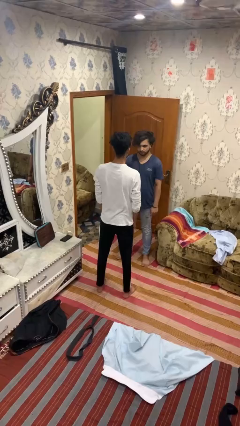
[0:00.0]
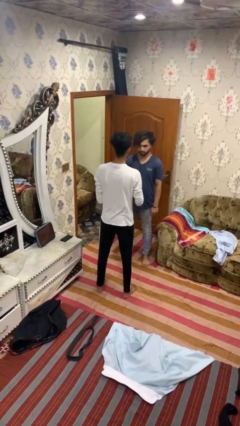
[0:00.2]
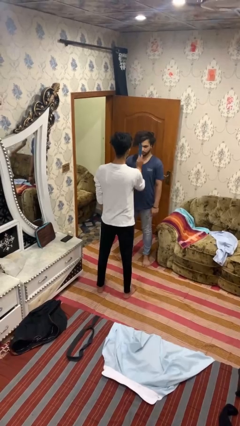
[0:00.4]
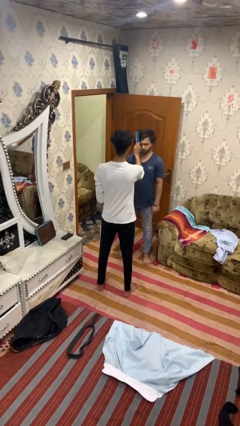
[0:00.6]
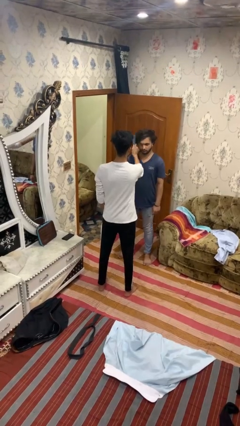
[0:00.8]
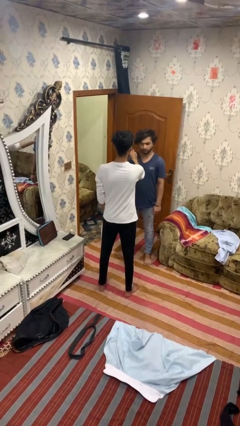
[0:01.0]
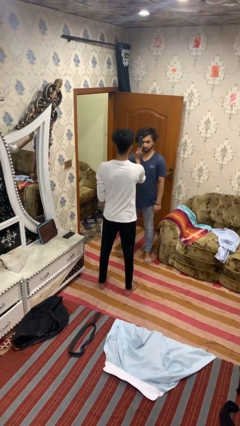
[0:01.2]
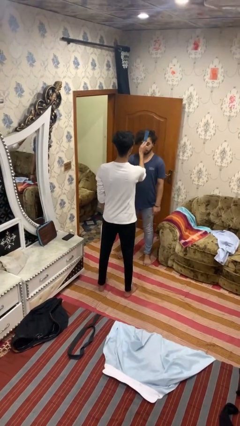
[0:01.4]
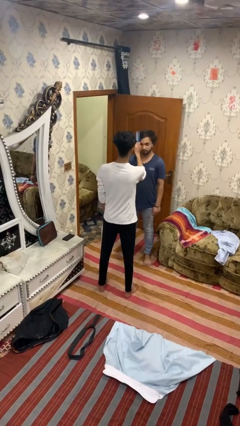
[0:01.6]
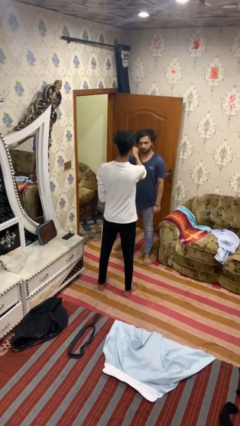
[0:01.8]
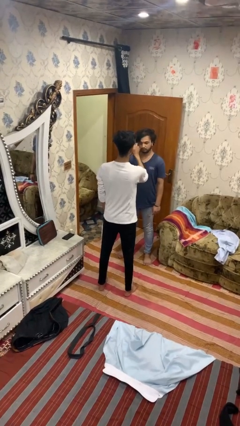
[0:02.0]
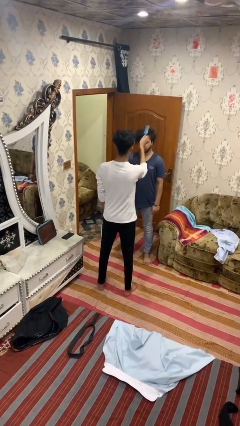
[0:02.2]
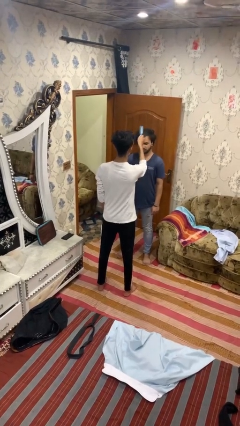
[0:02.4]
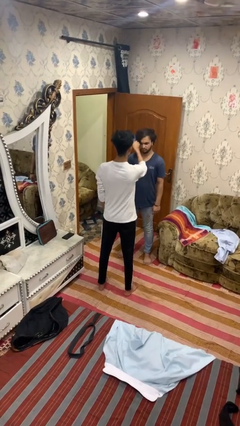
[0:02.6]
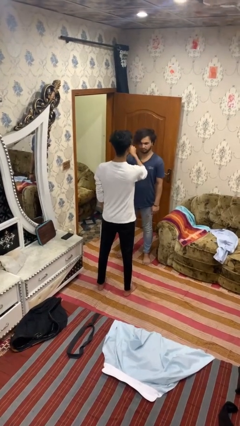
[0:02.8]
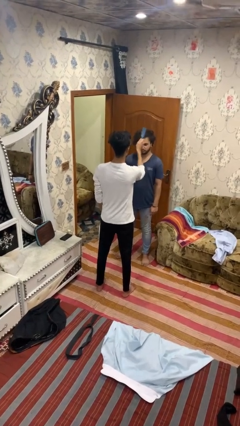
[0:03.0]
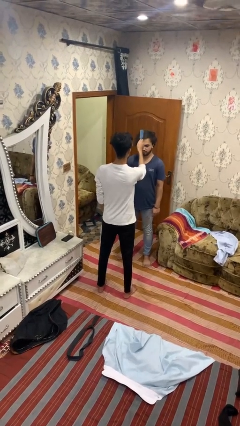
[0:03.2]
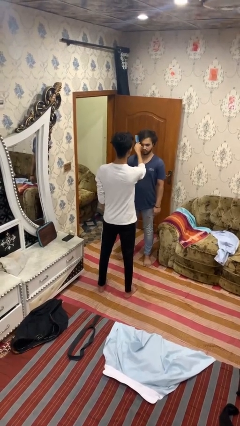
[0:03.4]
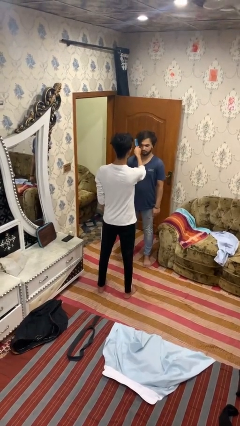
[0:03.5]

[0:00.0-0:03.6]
person brushes hair of person

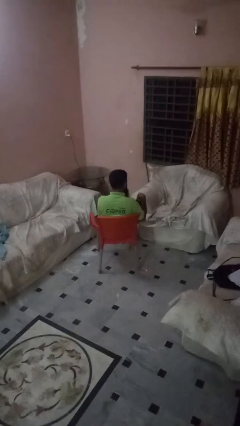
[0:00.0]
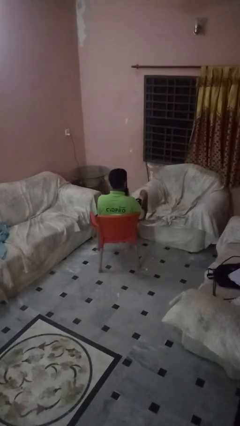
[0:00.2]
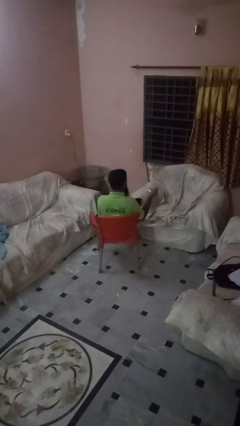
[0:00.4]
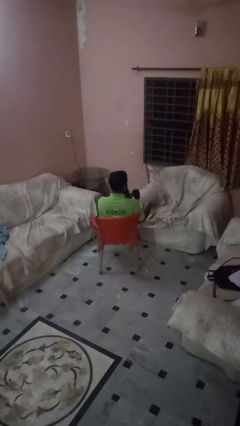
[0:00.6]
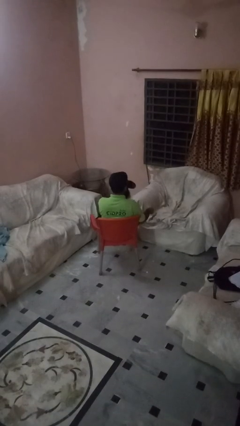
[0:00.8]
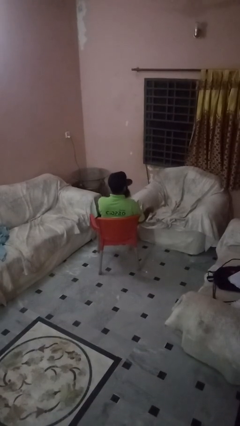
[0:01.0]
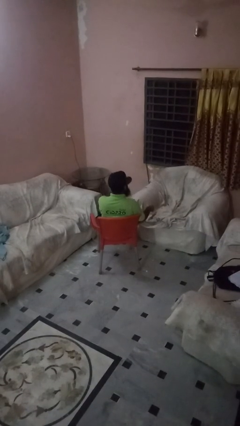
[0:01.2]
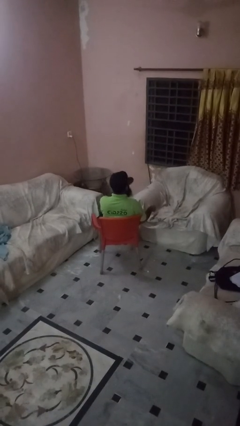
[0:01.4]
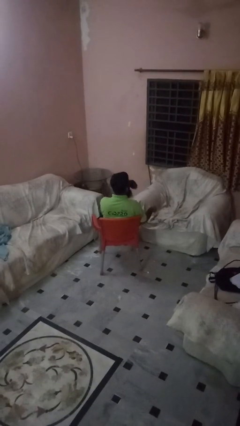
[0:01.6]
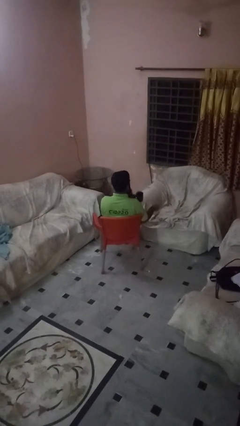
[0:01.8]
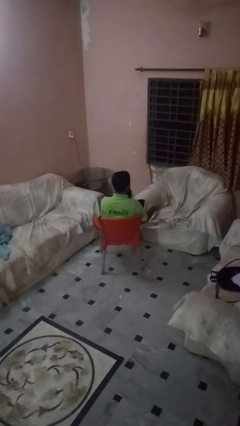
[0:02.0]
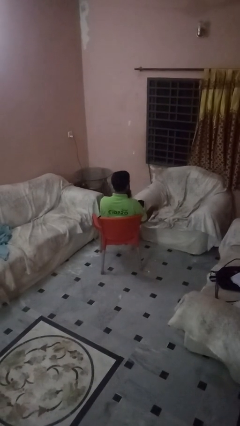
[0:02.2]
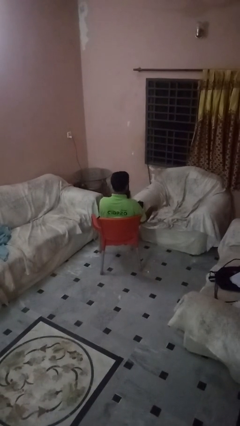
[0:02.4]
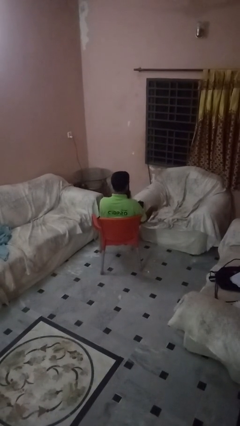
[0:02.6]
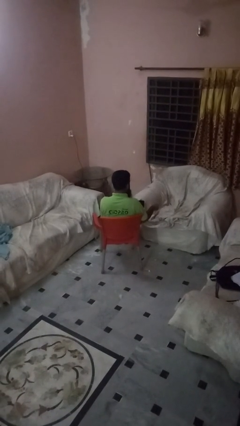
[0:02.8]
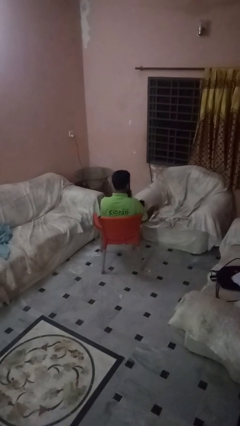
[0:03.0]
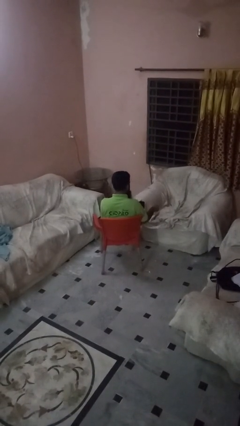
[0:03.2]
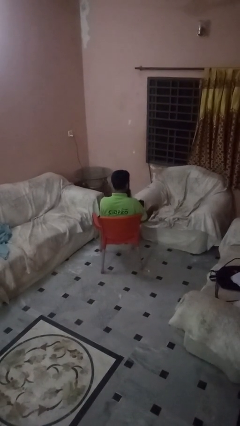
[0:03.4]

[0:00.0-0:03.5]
person drinks from mug

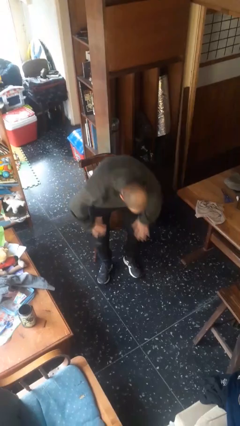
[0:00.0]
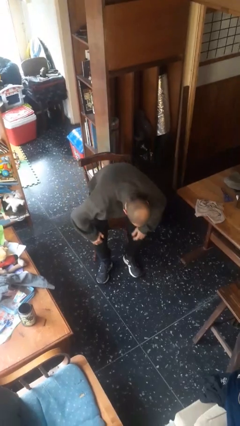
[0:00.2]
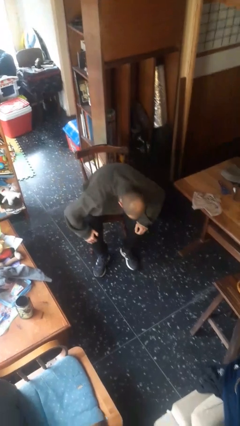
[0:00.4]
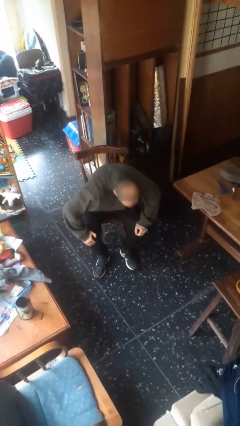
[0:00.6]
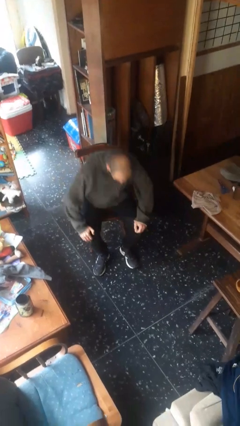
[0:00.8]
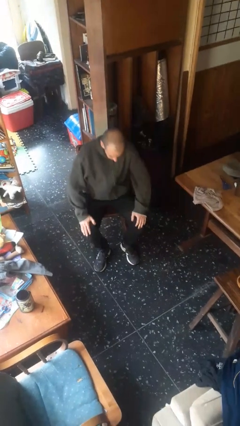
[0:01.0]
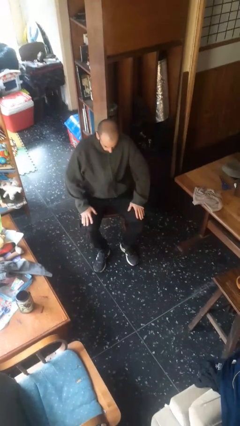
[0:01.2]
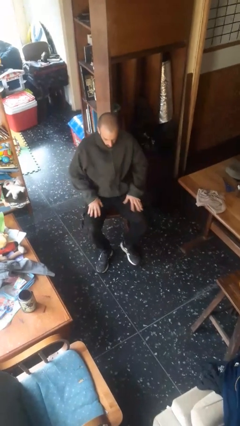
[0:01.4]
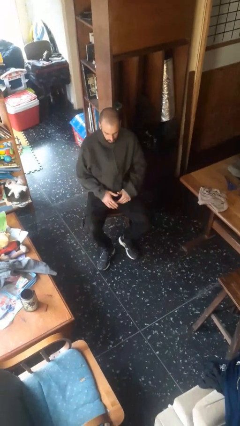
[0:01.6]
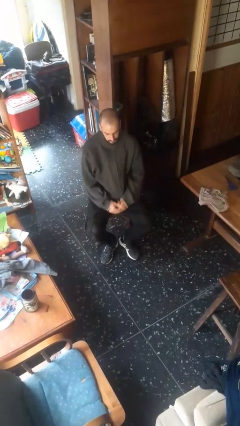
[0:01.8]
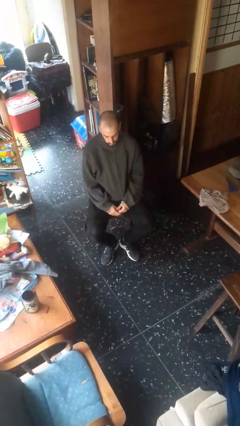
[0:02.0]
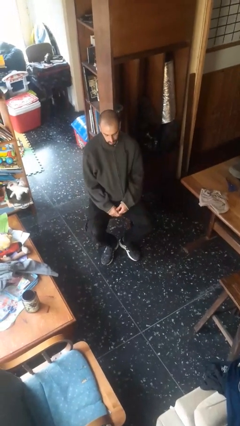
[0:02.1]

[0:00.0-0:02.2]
person sits down

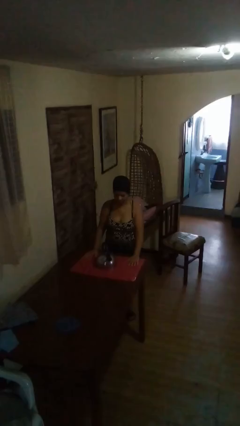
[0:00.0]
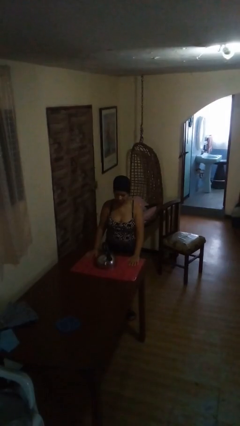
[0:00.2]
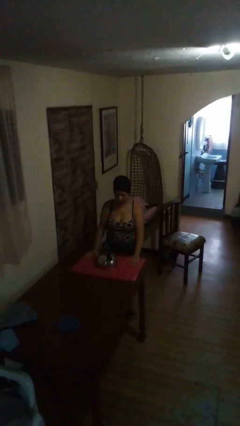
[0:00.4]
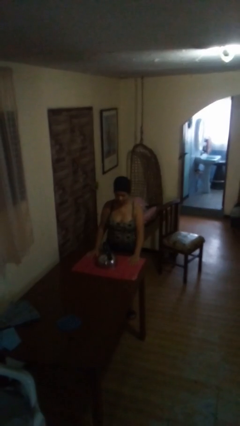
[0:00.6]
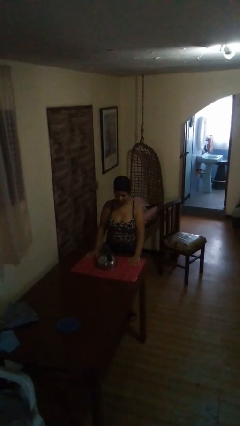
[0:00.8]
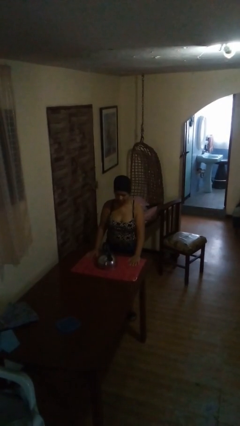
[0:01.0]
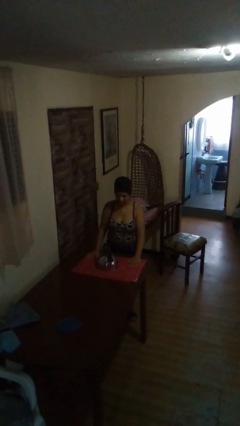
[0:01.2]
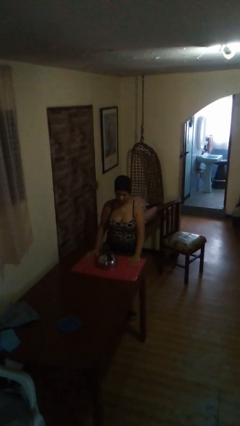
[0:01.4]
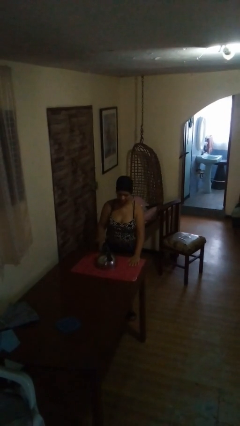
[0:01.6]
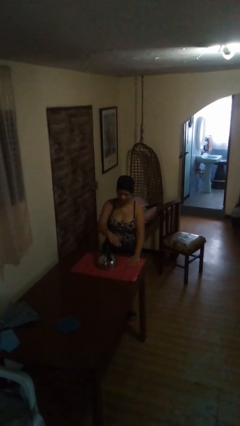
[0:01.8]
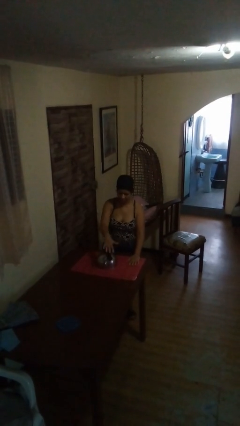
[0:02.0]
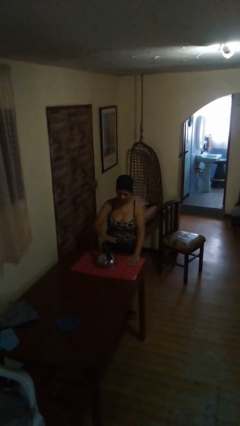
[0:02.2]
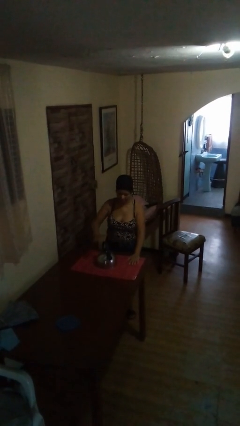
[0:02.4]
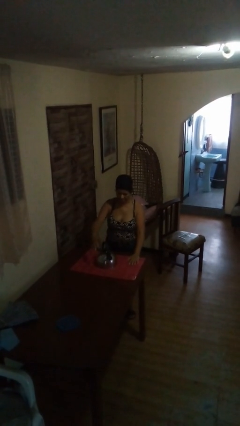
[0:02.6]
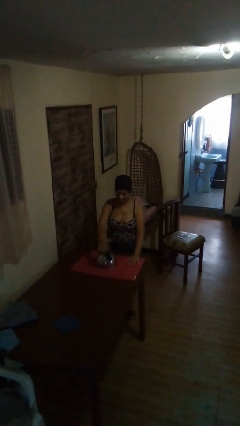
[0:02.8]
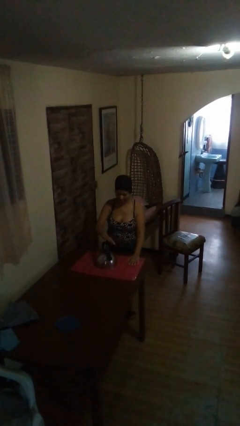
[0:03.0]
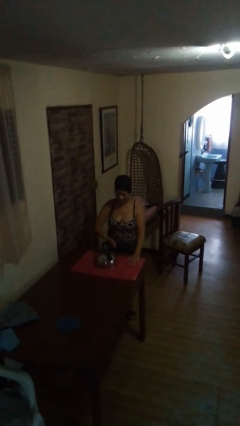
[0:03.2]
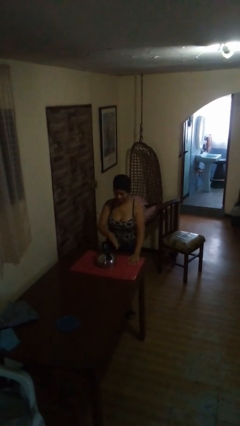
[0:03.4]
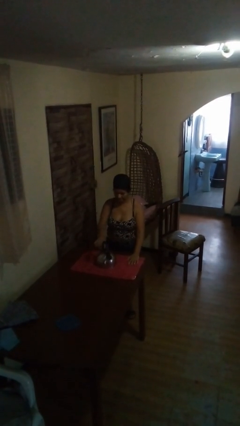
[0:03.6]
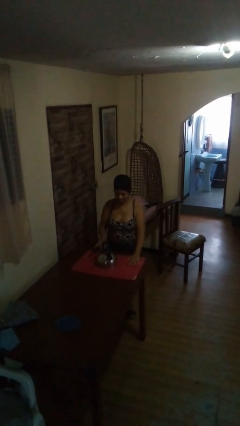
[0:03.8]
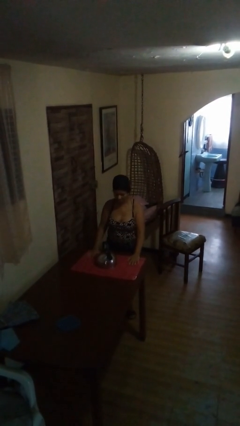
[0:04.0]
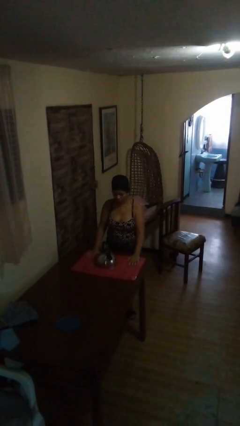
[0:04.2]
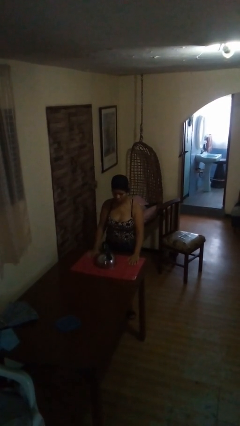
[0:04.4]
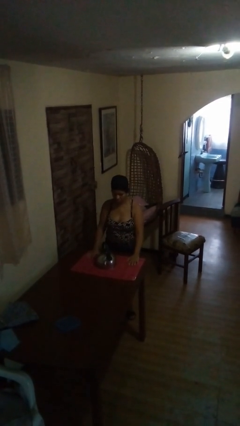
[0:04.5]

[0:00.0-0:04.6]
person waves hand over object

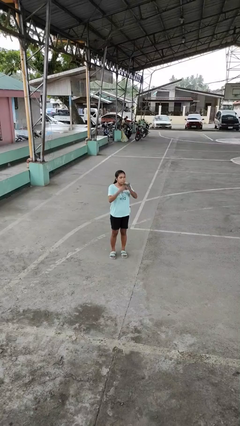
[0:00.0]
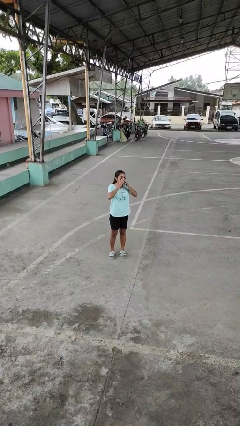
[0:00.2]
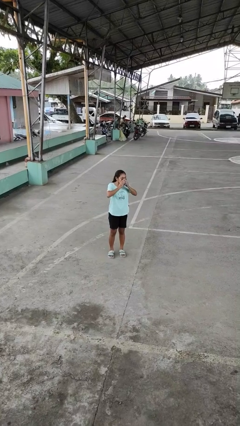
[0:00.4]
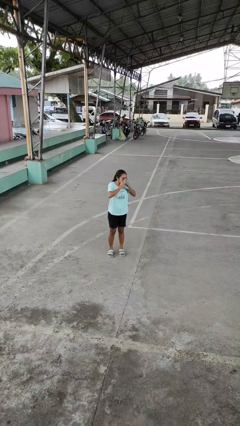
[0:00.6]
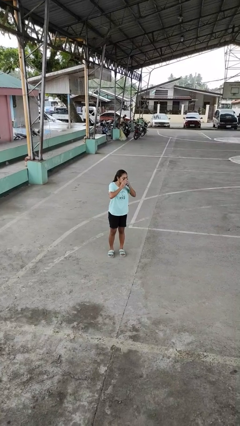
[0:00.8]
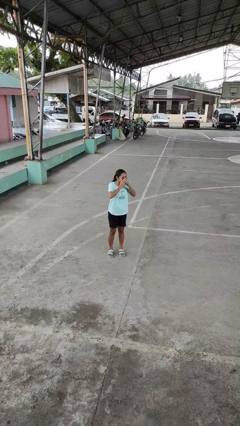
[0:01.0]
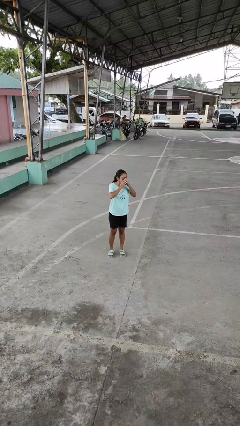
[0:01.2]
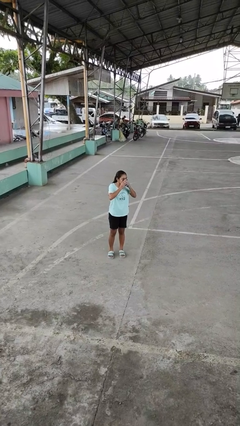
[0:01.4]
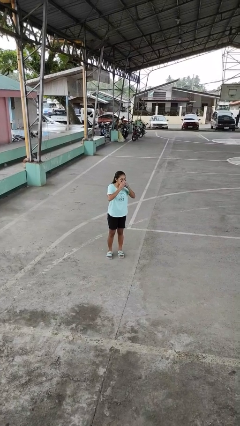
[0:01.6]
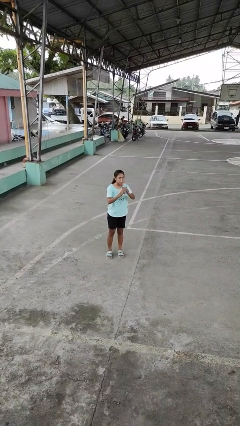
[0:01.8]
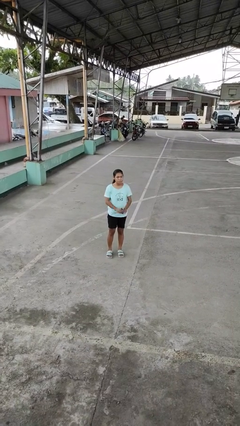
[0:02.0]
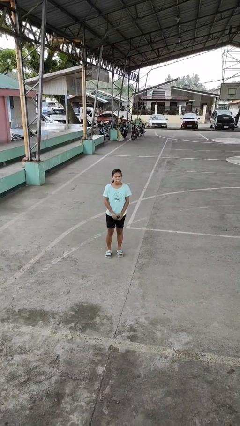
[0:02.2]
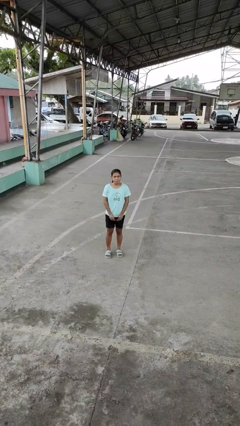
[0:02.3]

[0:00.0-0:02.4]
person blows nose

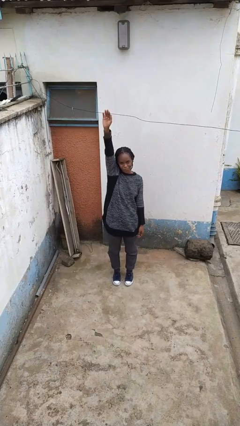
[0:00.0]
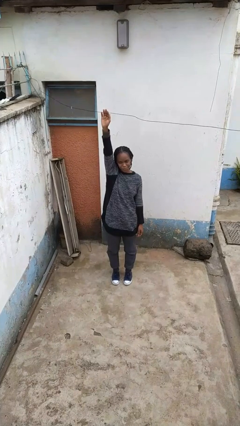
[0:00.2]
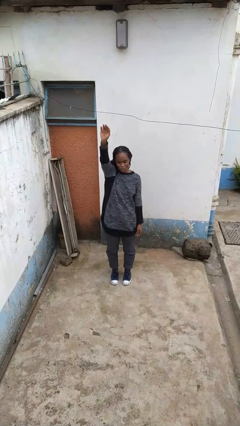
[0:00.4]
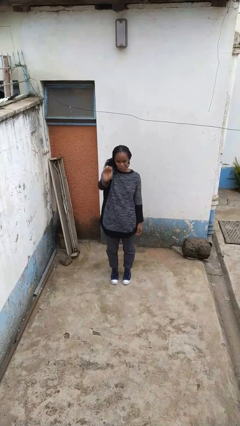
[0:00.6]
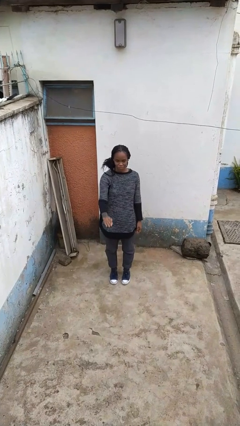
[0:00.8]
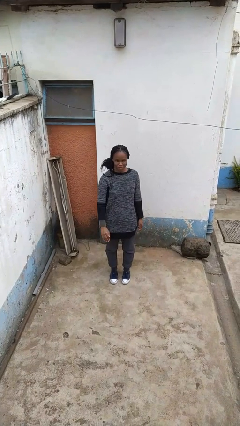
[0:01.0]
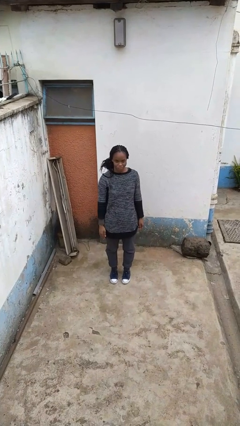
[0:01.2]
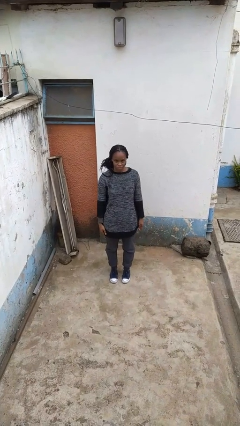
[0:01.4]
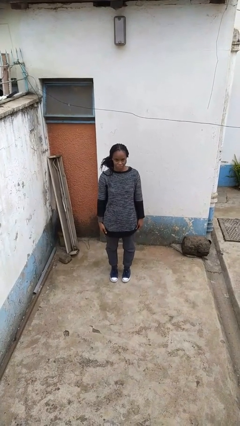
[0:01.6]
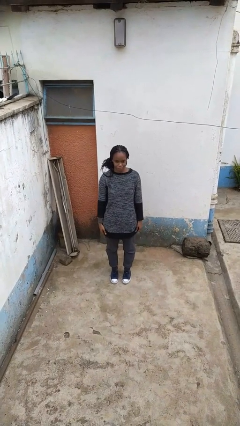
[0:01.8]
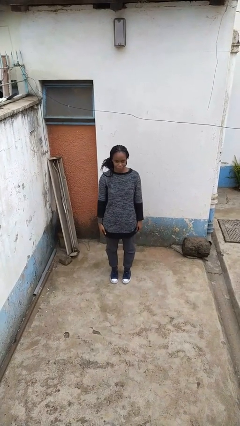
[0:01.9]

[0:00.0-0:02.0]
person gestures lower hand
